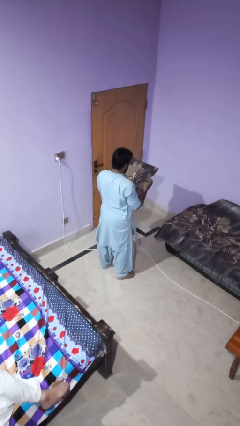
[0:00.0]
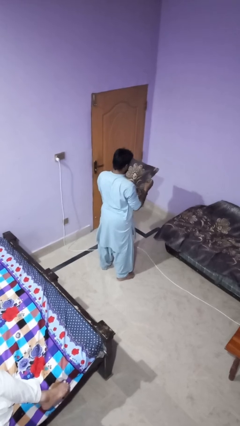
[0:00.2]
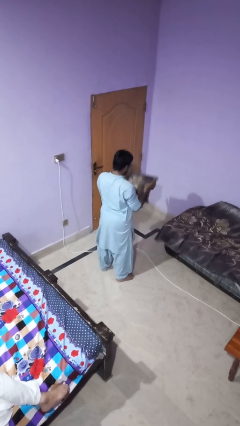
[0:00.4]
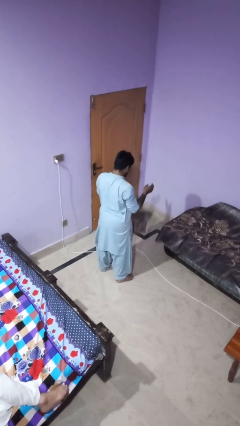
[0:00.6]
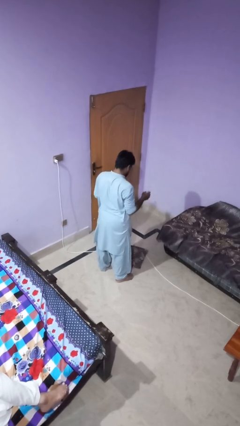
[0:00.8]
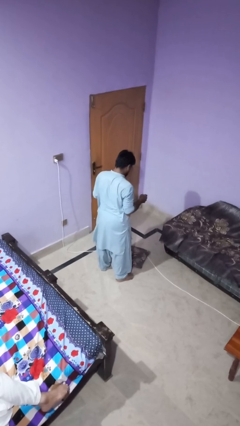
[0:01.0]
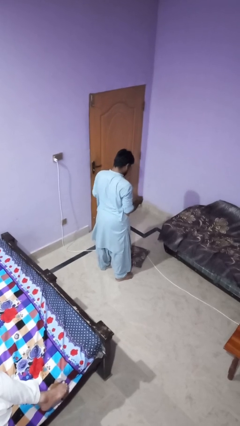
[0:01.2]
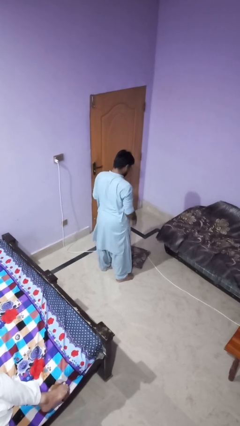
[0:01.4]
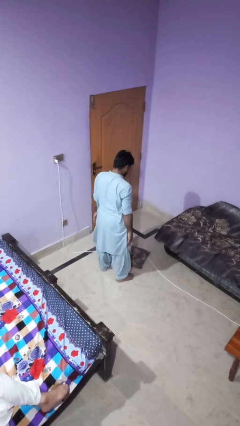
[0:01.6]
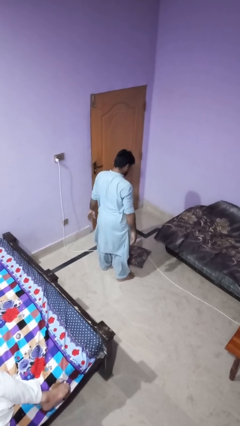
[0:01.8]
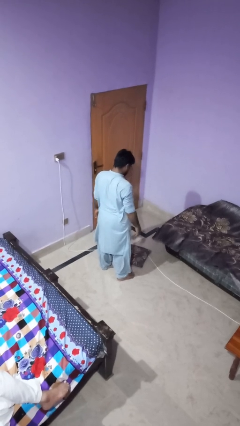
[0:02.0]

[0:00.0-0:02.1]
person drops object

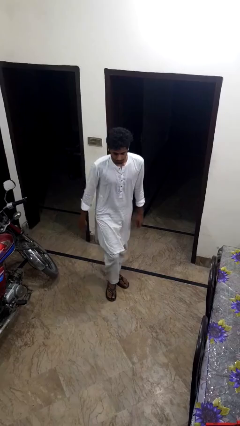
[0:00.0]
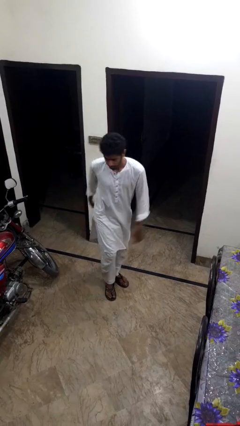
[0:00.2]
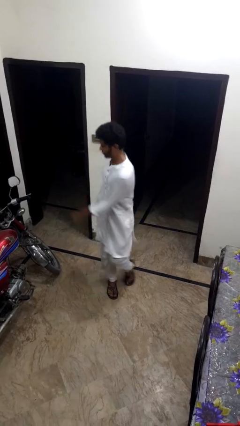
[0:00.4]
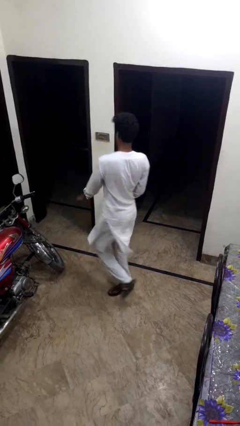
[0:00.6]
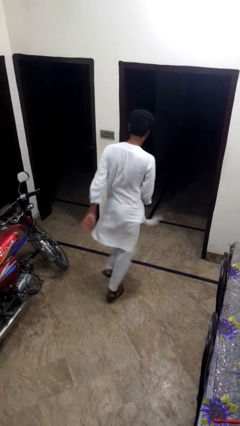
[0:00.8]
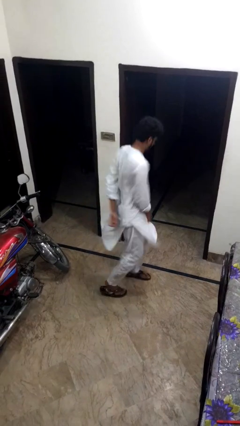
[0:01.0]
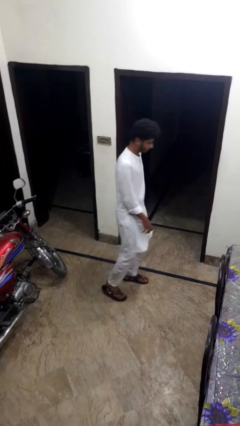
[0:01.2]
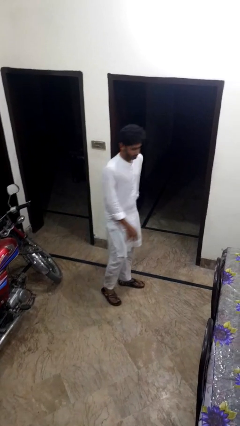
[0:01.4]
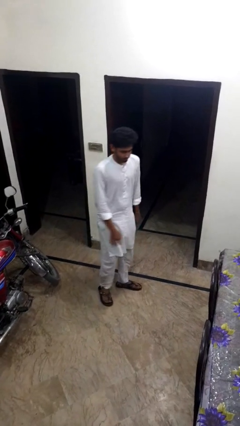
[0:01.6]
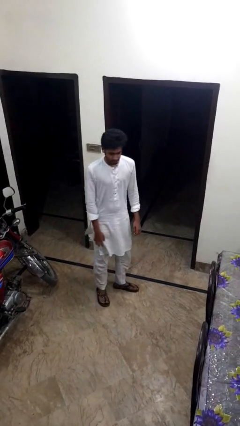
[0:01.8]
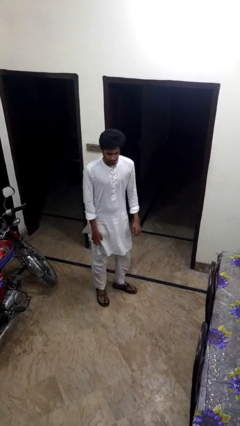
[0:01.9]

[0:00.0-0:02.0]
person twirls

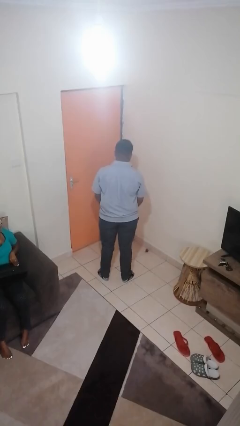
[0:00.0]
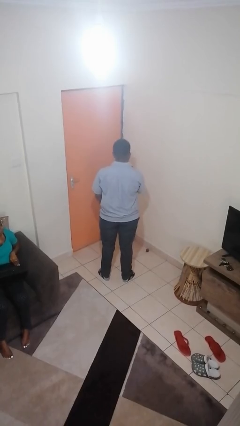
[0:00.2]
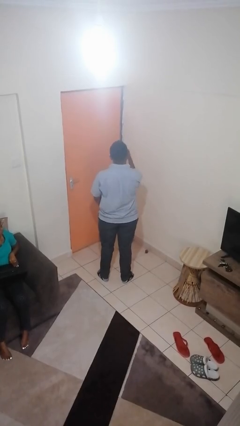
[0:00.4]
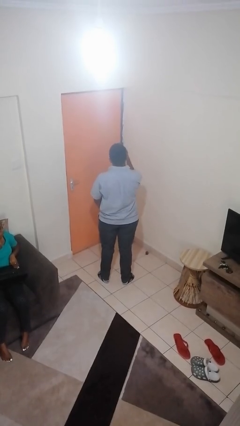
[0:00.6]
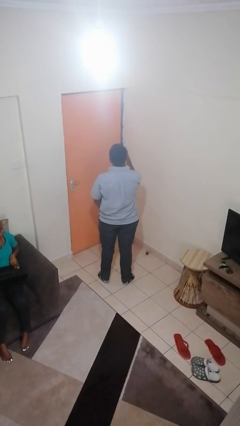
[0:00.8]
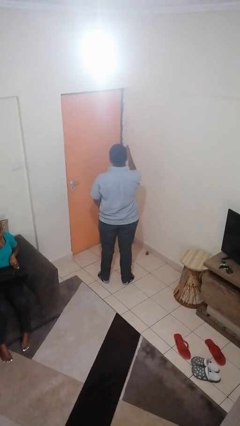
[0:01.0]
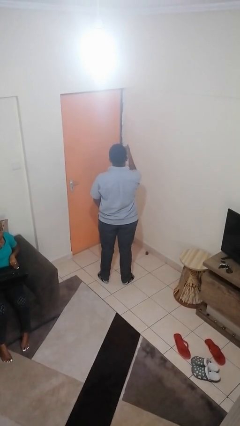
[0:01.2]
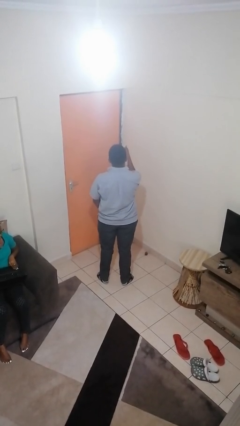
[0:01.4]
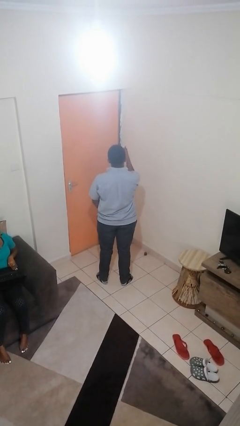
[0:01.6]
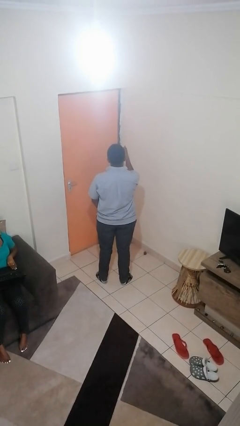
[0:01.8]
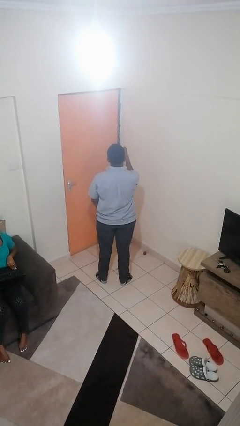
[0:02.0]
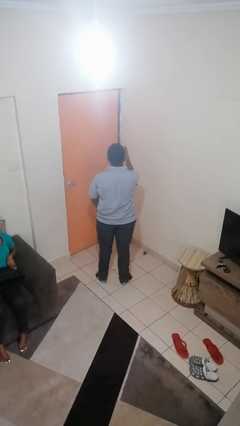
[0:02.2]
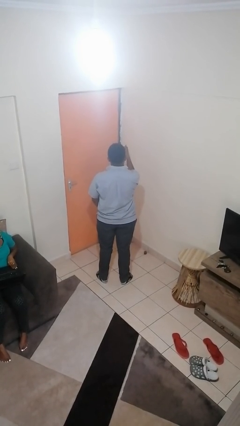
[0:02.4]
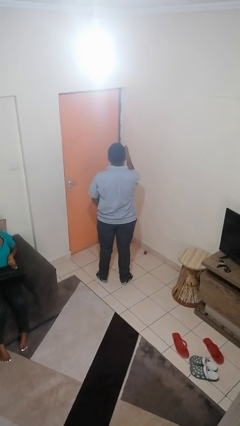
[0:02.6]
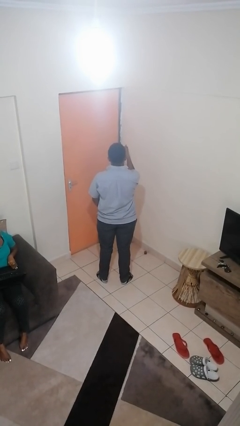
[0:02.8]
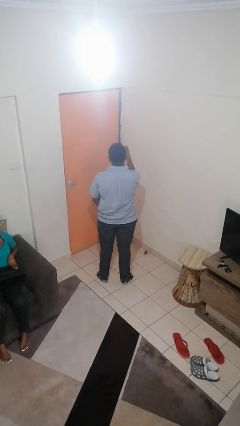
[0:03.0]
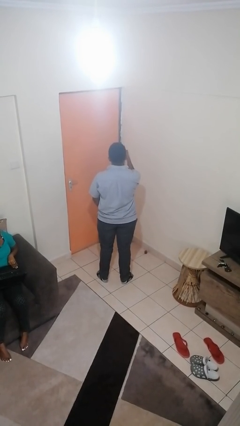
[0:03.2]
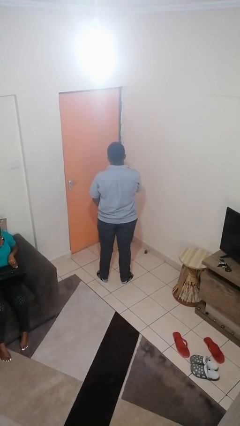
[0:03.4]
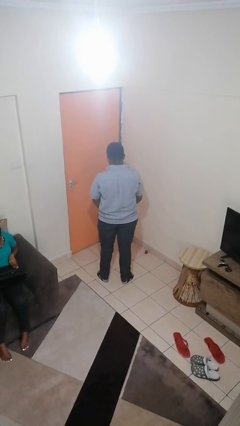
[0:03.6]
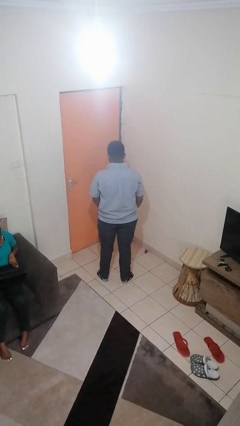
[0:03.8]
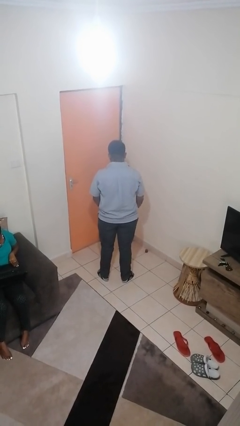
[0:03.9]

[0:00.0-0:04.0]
person gestures thumbs up

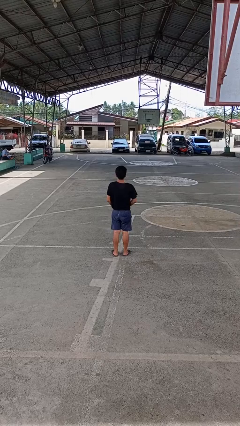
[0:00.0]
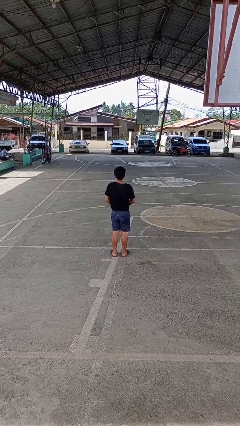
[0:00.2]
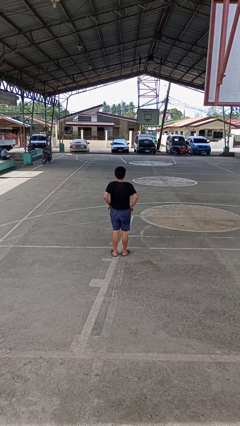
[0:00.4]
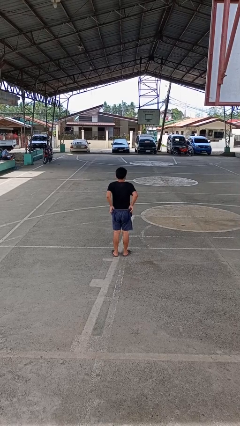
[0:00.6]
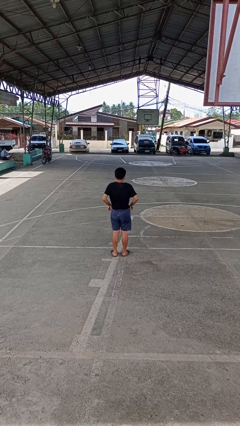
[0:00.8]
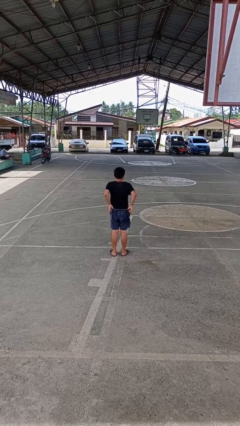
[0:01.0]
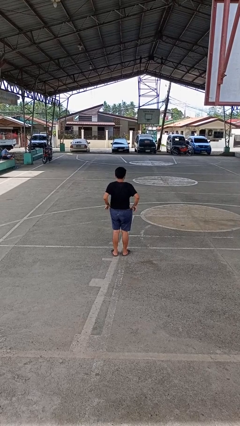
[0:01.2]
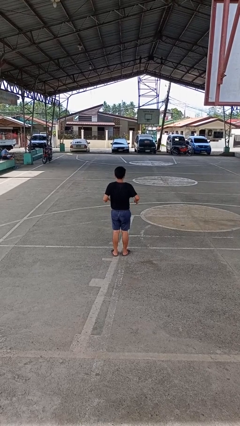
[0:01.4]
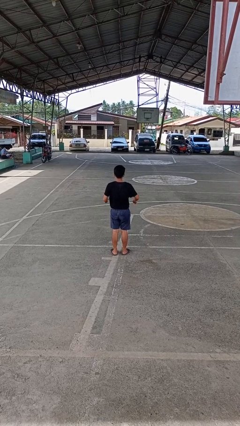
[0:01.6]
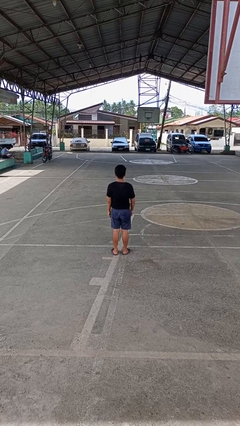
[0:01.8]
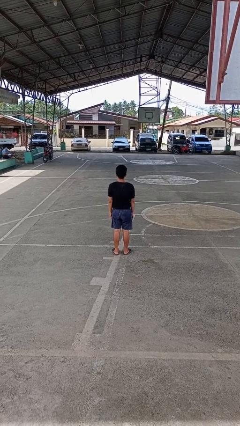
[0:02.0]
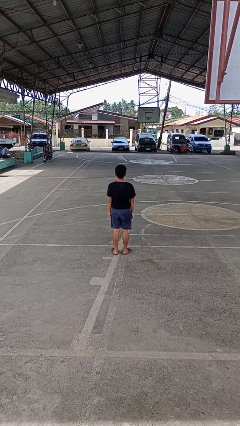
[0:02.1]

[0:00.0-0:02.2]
person hikes up pants

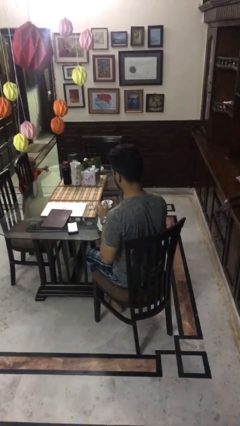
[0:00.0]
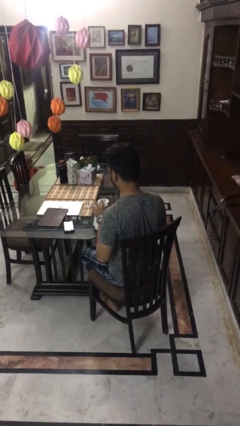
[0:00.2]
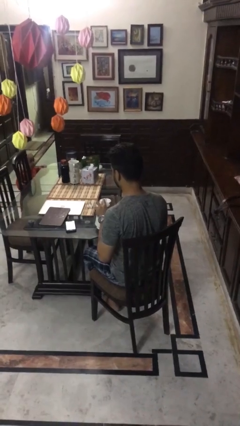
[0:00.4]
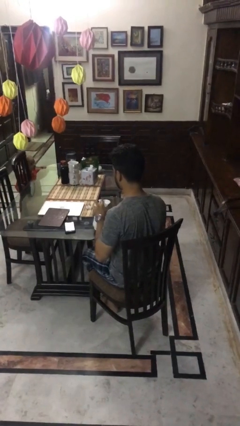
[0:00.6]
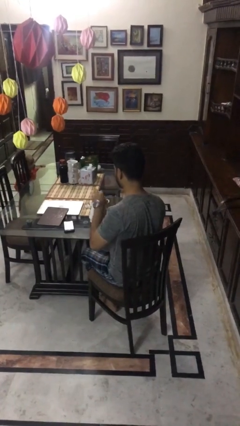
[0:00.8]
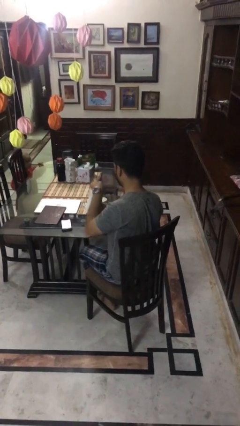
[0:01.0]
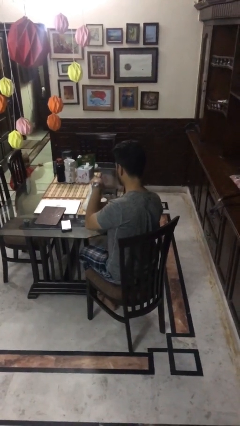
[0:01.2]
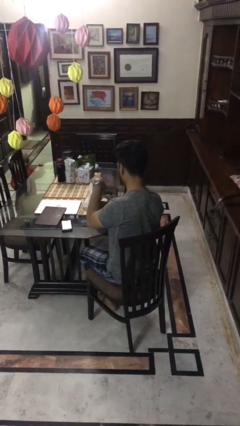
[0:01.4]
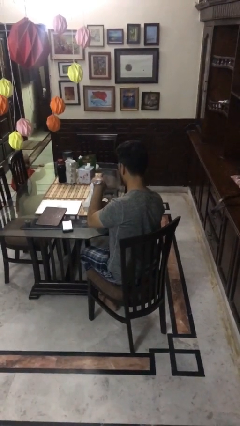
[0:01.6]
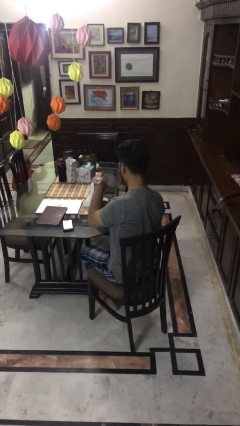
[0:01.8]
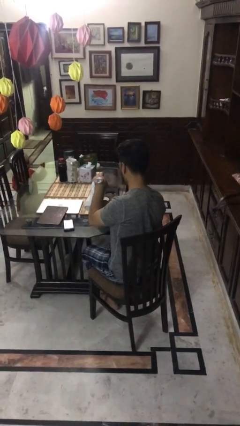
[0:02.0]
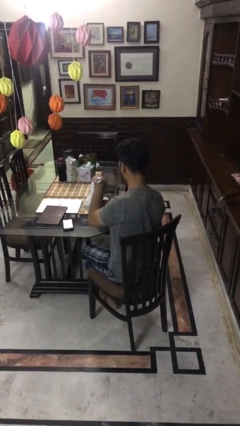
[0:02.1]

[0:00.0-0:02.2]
person pours coffee into mug

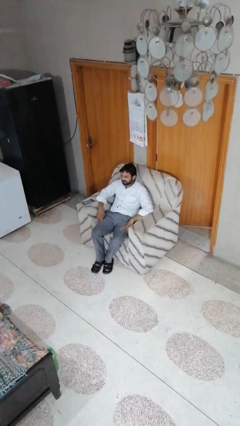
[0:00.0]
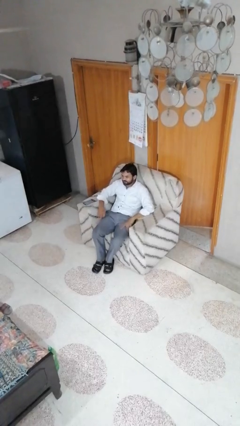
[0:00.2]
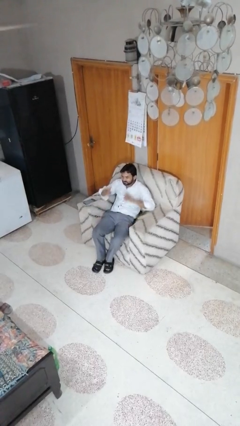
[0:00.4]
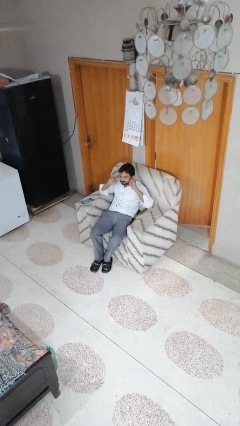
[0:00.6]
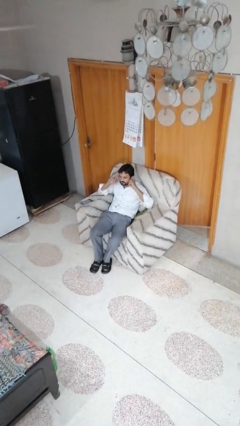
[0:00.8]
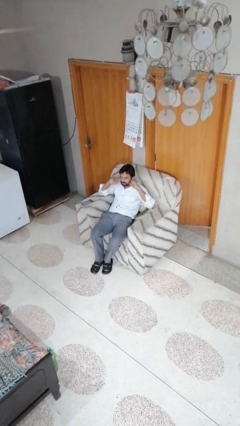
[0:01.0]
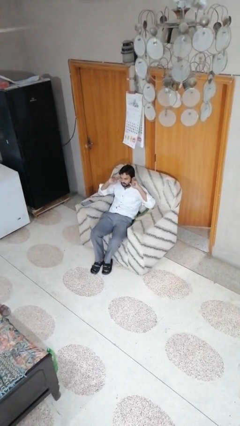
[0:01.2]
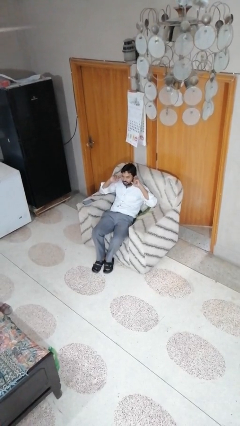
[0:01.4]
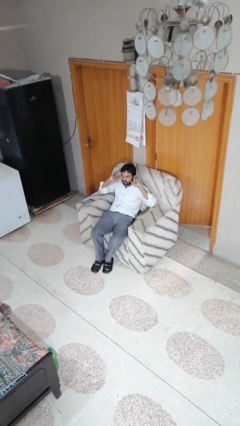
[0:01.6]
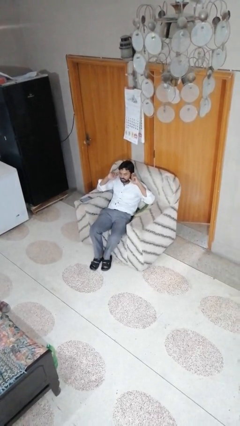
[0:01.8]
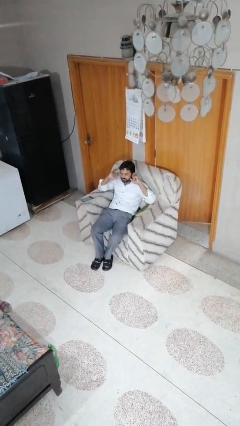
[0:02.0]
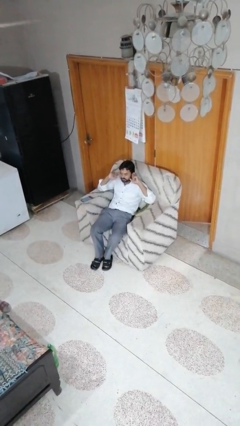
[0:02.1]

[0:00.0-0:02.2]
person puts fingers in ear

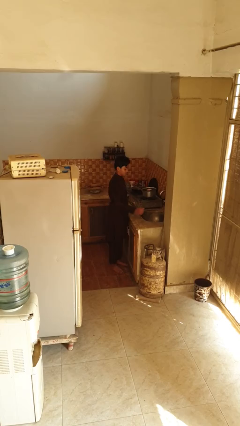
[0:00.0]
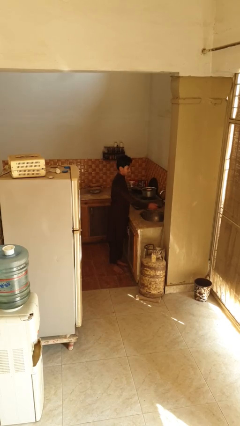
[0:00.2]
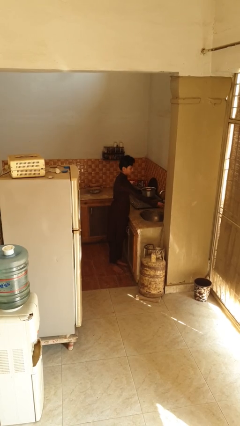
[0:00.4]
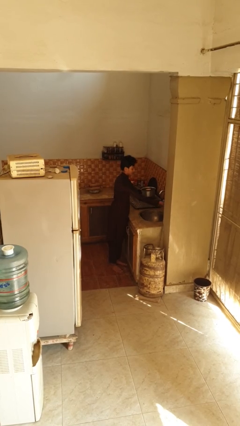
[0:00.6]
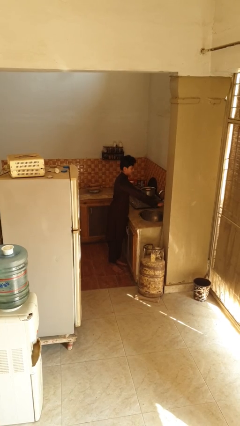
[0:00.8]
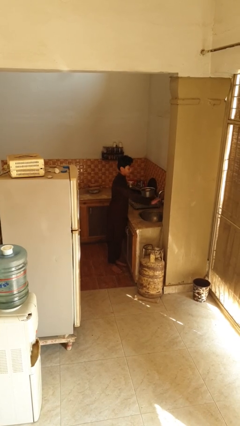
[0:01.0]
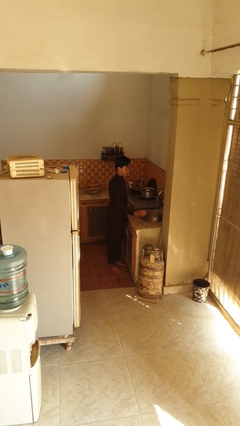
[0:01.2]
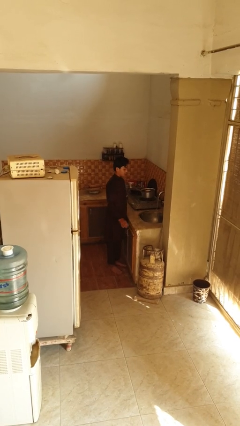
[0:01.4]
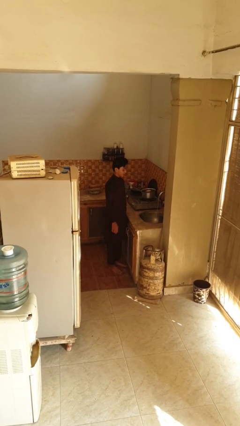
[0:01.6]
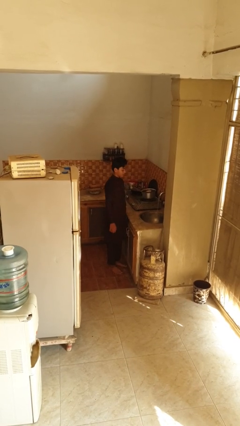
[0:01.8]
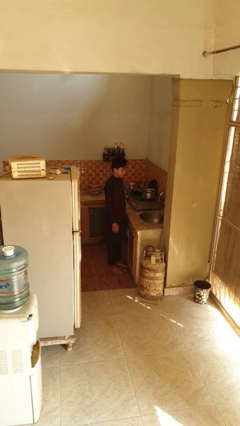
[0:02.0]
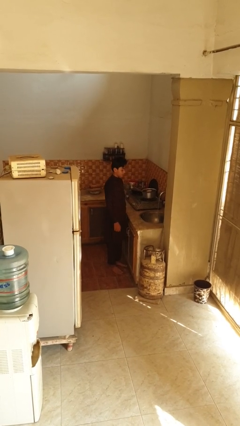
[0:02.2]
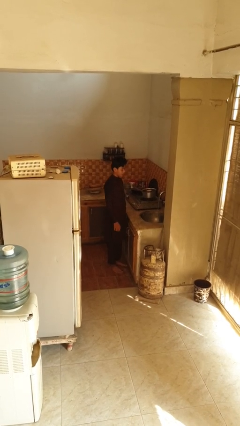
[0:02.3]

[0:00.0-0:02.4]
person turns on faucet
